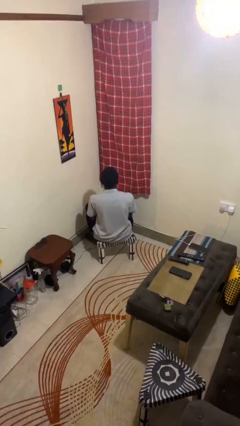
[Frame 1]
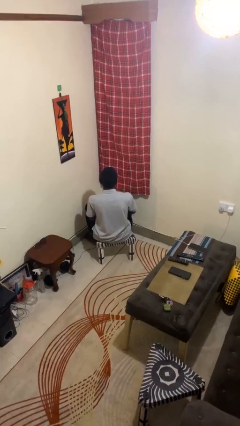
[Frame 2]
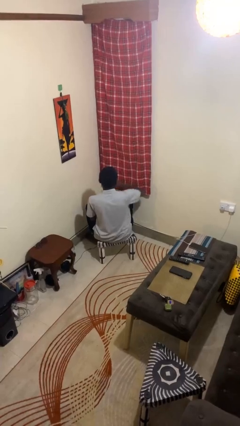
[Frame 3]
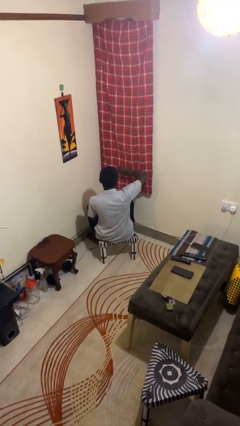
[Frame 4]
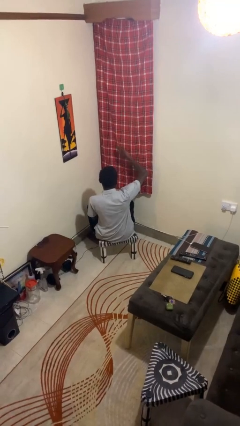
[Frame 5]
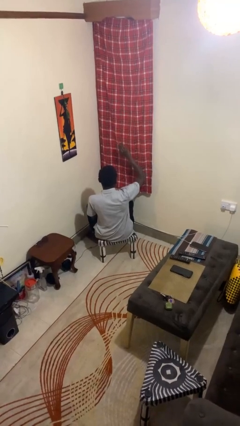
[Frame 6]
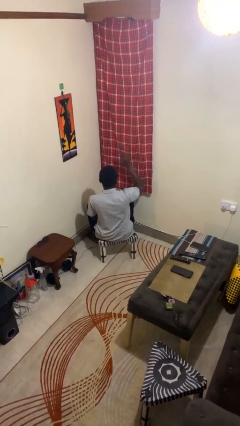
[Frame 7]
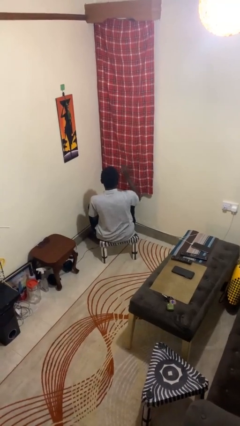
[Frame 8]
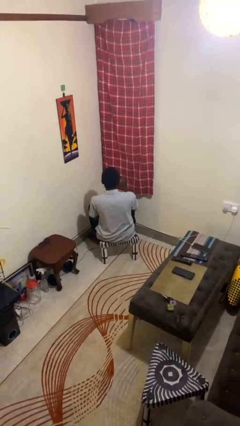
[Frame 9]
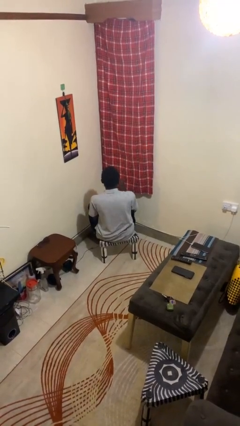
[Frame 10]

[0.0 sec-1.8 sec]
person gestures swipe up

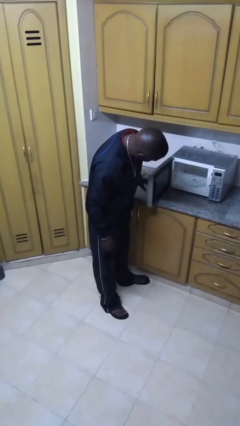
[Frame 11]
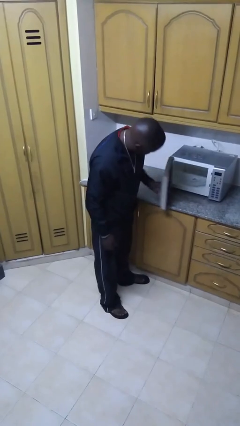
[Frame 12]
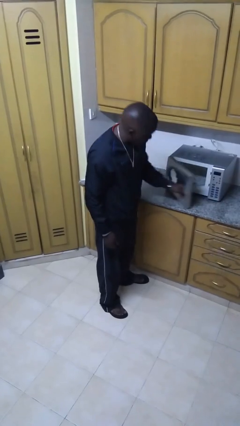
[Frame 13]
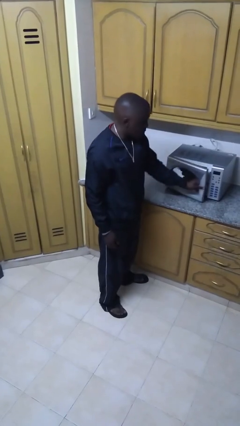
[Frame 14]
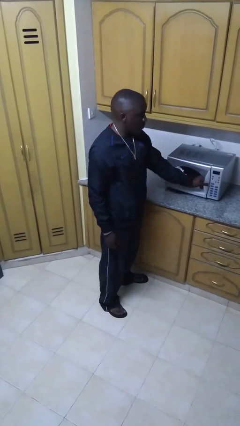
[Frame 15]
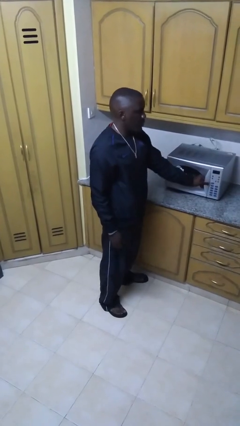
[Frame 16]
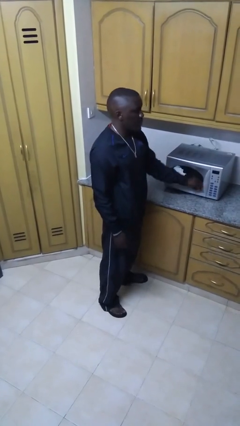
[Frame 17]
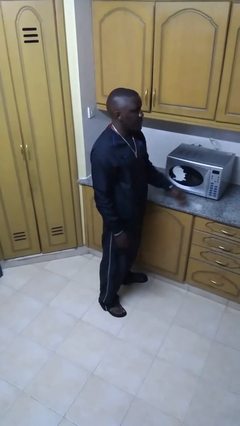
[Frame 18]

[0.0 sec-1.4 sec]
person closes microwave

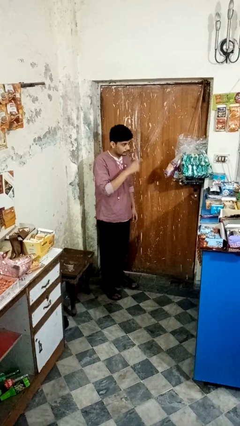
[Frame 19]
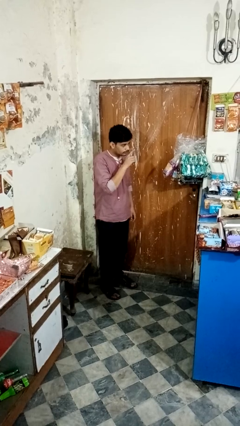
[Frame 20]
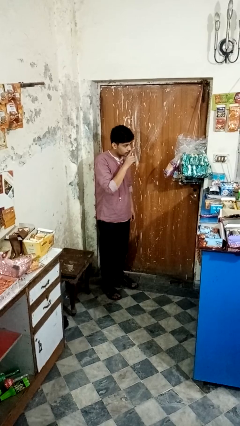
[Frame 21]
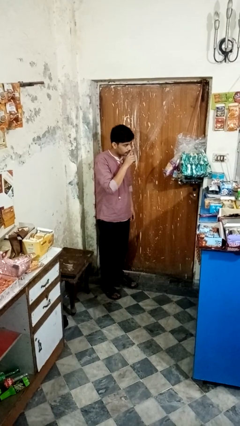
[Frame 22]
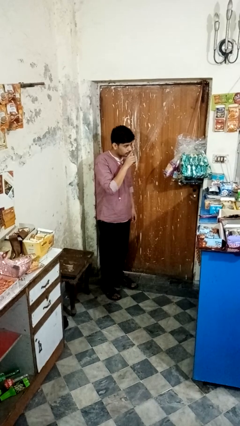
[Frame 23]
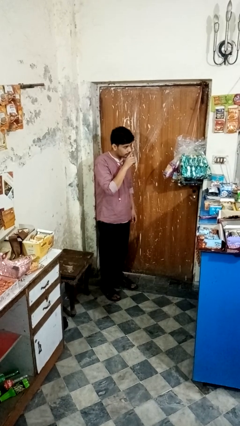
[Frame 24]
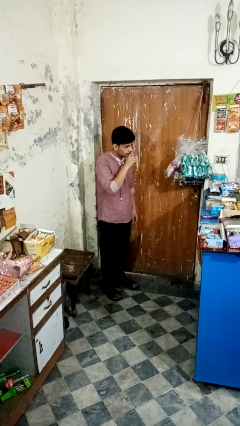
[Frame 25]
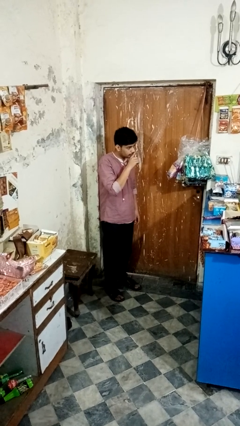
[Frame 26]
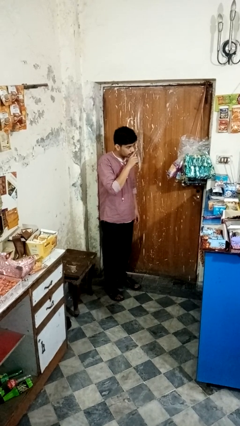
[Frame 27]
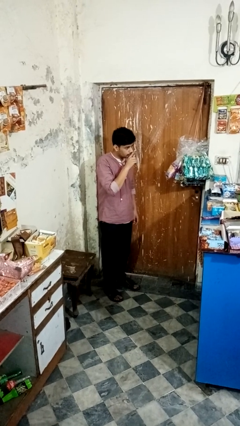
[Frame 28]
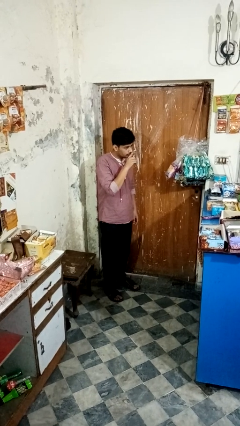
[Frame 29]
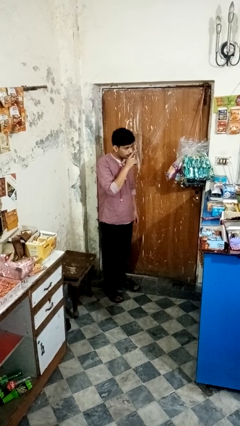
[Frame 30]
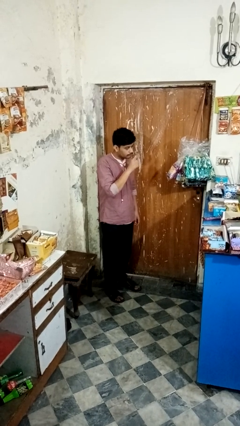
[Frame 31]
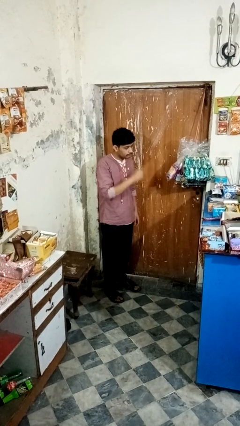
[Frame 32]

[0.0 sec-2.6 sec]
person gestures be quiet

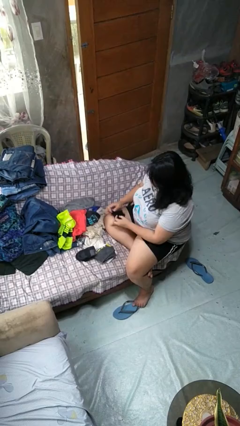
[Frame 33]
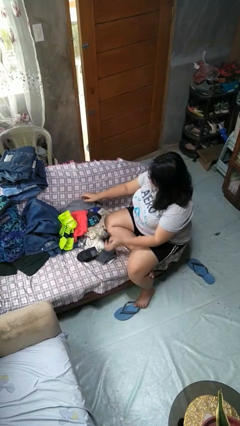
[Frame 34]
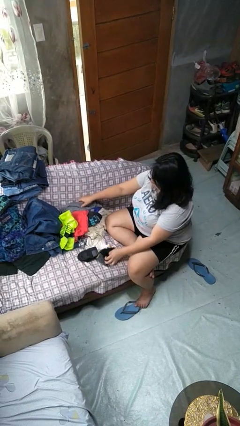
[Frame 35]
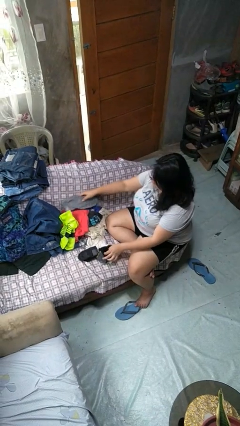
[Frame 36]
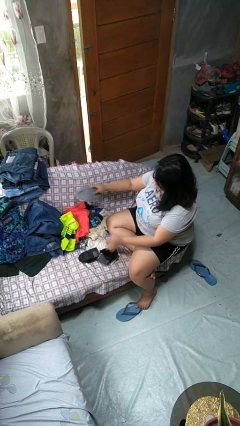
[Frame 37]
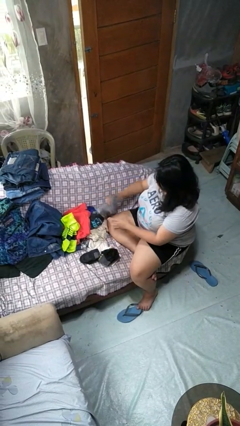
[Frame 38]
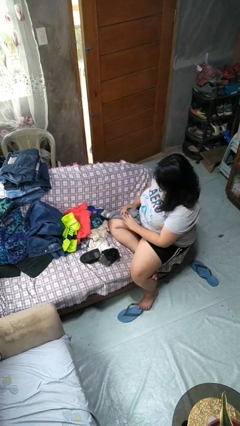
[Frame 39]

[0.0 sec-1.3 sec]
person folds socks

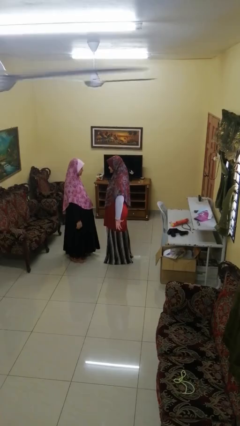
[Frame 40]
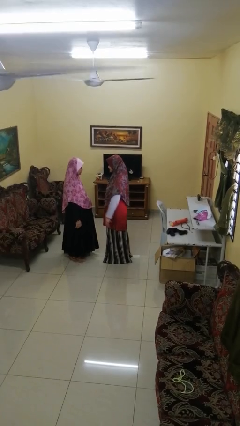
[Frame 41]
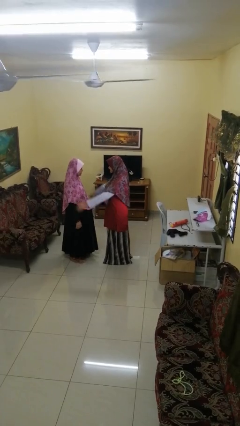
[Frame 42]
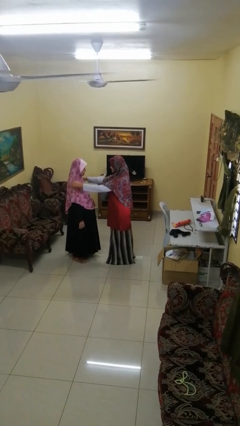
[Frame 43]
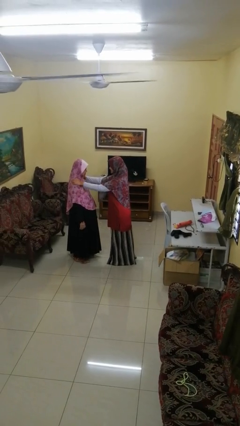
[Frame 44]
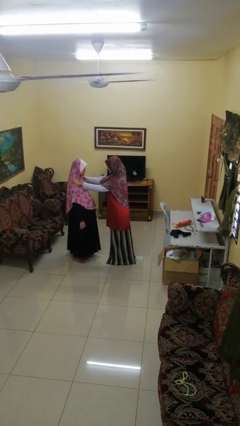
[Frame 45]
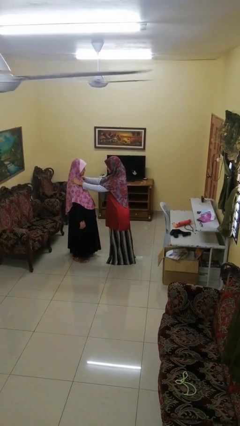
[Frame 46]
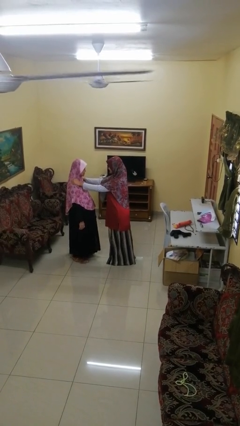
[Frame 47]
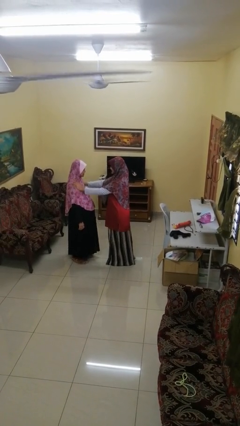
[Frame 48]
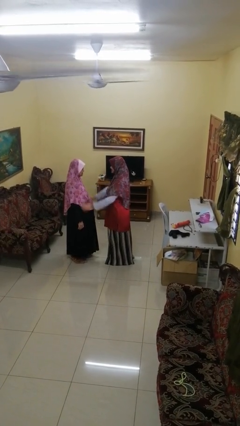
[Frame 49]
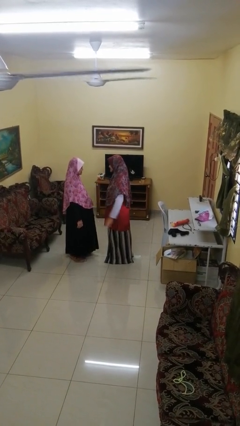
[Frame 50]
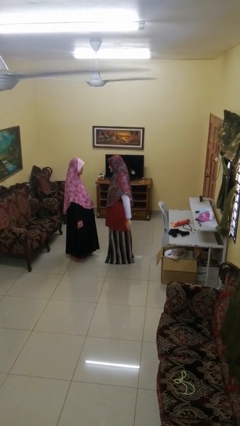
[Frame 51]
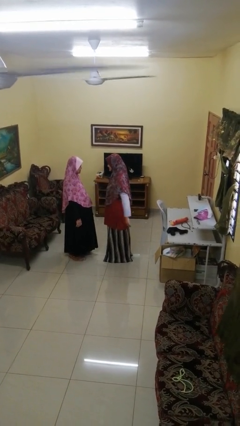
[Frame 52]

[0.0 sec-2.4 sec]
person pounds shoulders of person

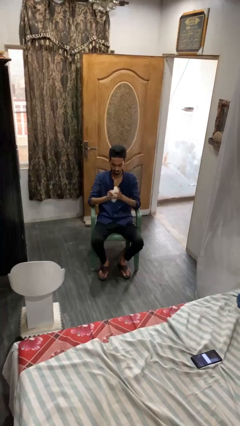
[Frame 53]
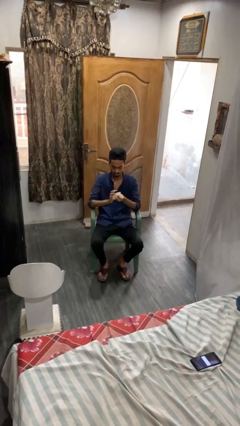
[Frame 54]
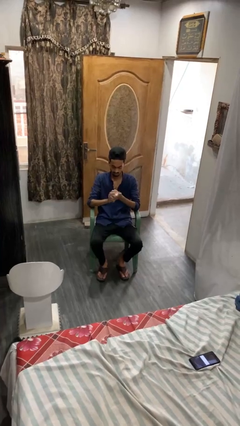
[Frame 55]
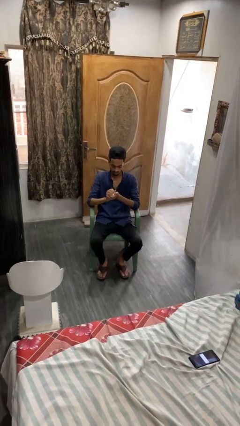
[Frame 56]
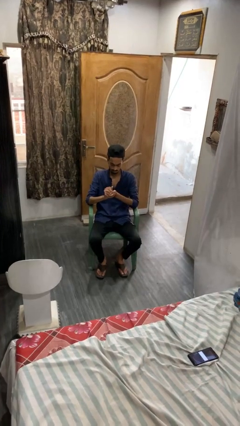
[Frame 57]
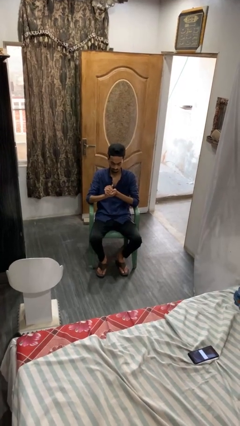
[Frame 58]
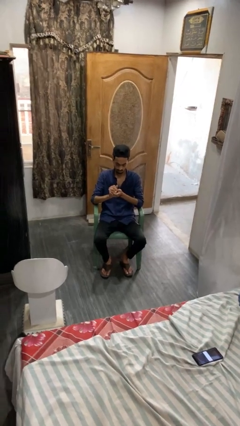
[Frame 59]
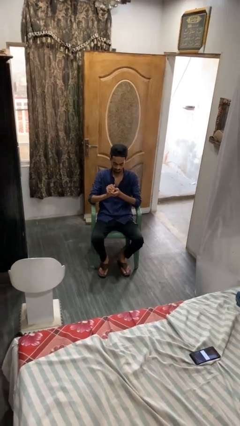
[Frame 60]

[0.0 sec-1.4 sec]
person crumples paper

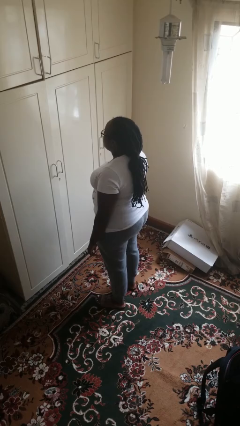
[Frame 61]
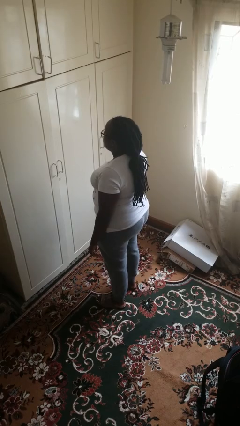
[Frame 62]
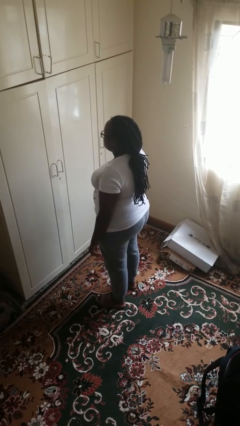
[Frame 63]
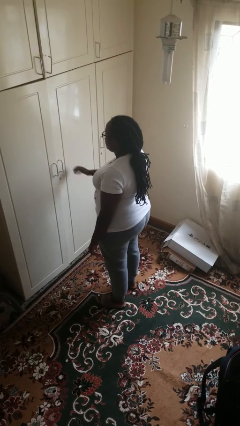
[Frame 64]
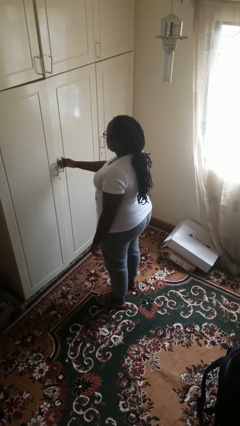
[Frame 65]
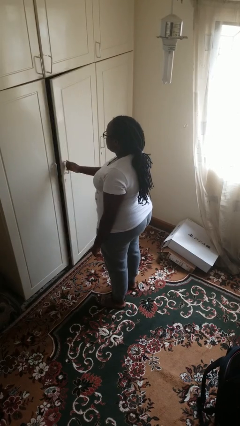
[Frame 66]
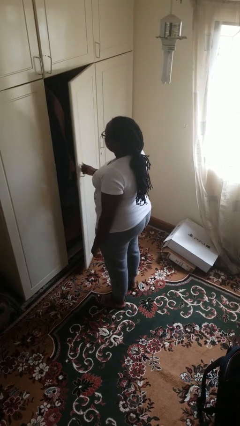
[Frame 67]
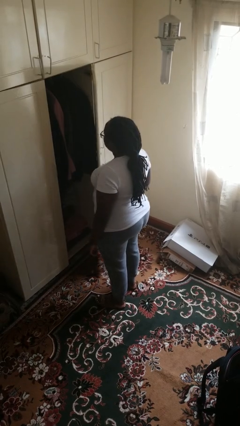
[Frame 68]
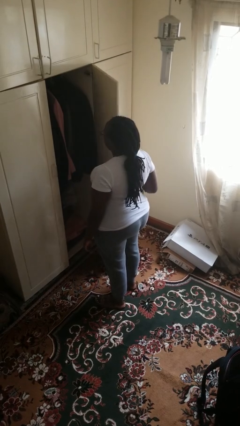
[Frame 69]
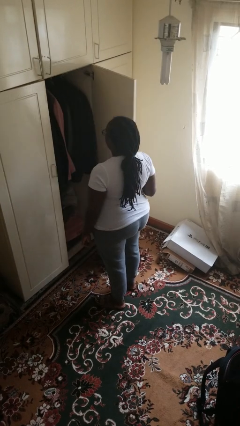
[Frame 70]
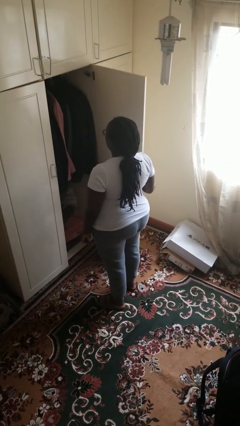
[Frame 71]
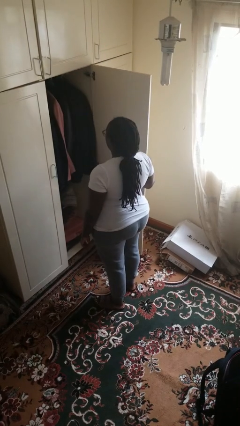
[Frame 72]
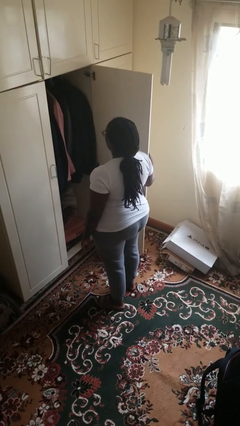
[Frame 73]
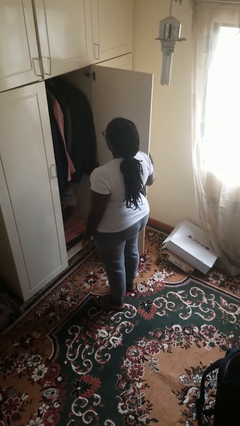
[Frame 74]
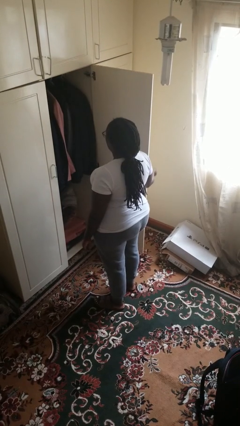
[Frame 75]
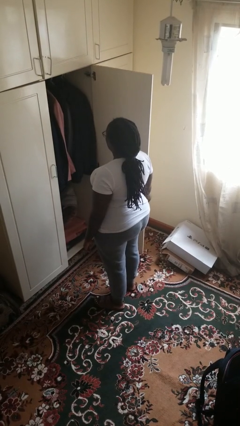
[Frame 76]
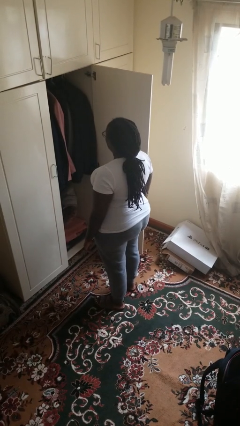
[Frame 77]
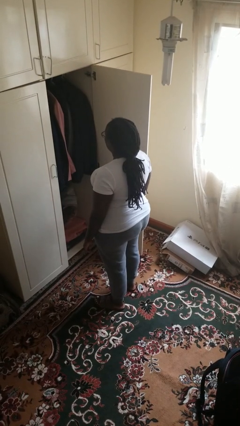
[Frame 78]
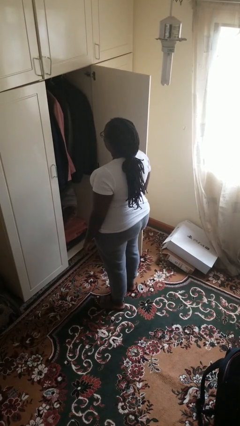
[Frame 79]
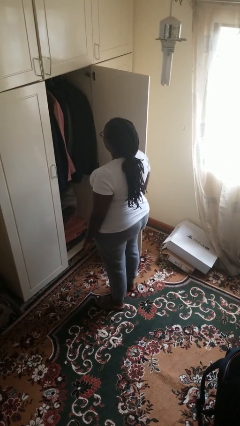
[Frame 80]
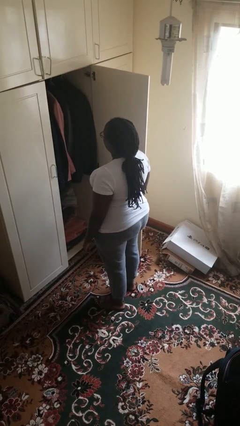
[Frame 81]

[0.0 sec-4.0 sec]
person opens closet door

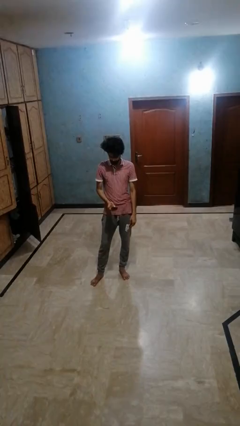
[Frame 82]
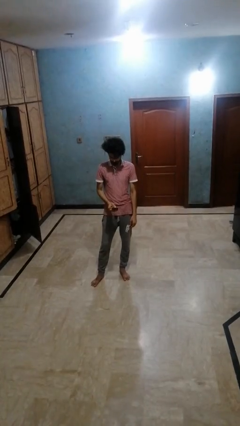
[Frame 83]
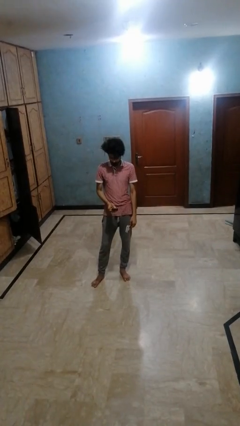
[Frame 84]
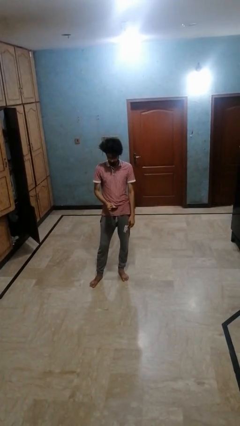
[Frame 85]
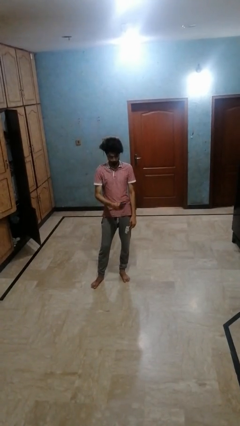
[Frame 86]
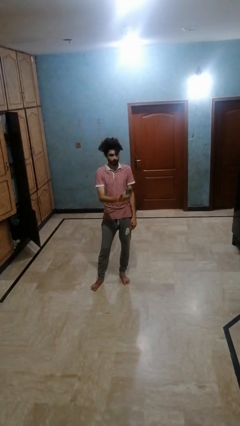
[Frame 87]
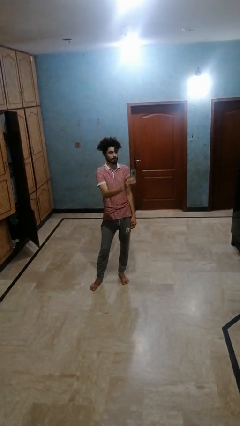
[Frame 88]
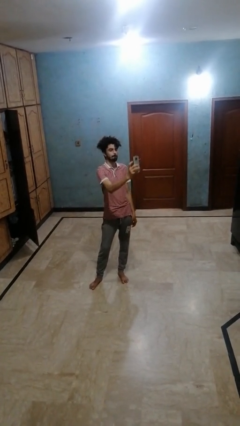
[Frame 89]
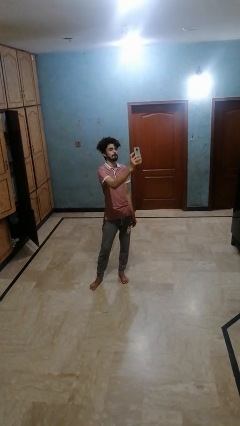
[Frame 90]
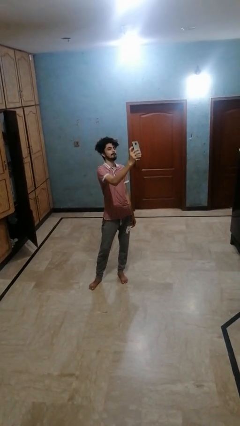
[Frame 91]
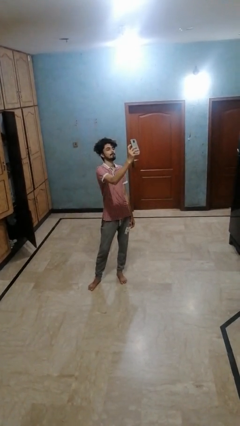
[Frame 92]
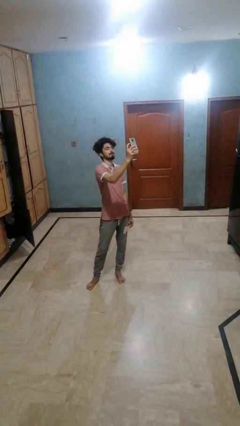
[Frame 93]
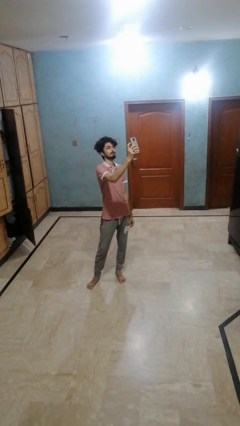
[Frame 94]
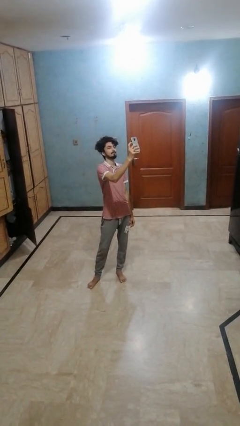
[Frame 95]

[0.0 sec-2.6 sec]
person takes selfie
